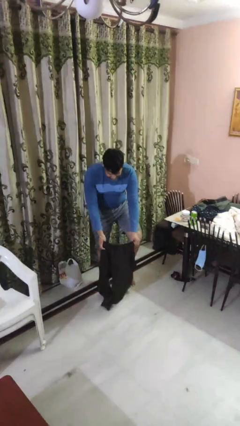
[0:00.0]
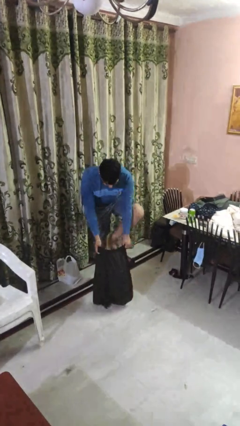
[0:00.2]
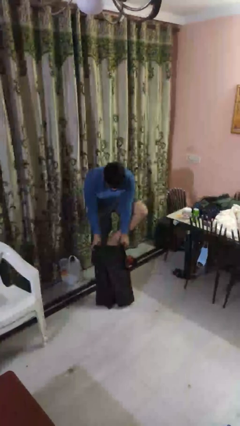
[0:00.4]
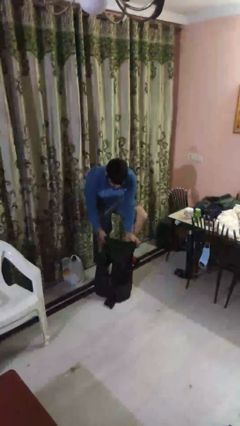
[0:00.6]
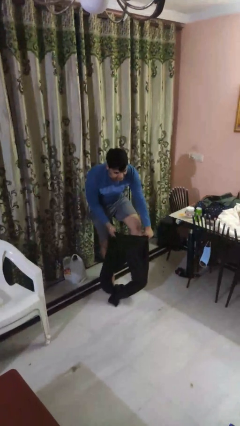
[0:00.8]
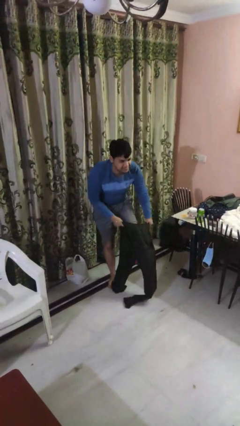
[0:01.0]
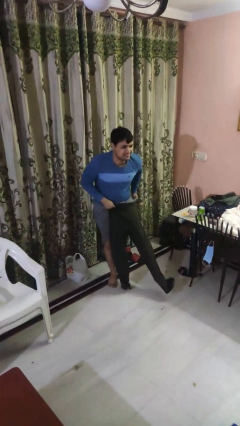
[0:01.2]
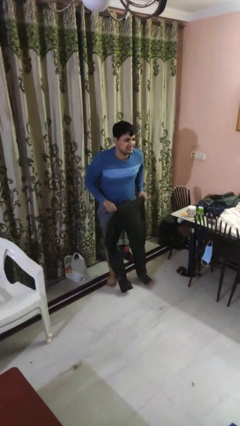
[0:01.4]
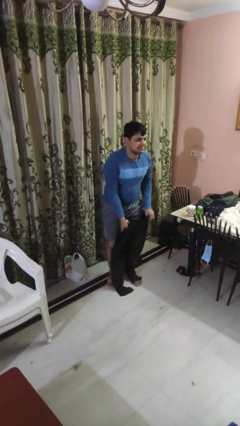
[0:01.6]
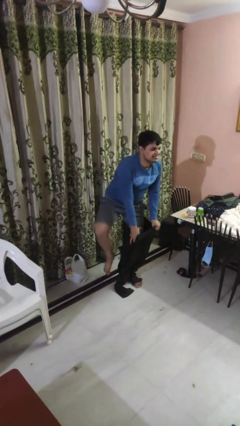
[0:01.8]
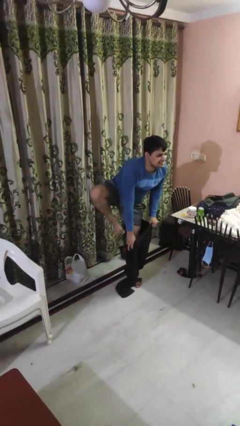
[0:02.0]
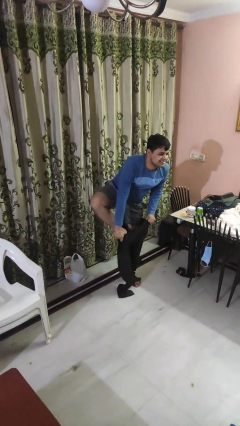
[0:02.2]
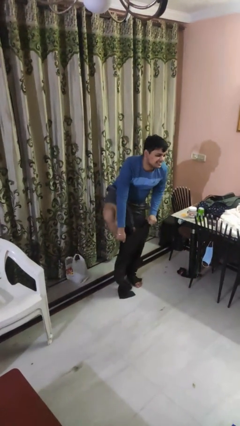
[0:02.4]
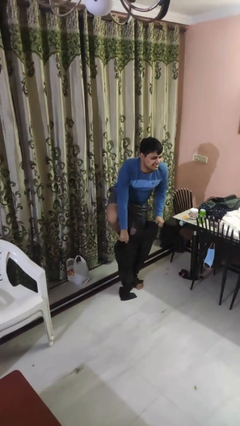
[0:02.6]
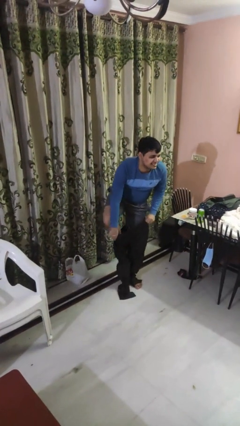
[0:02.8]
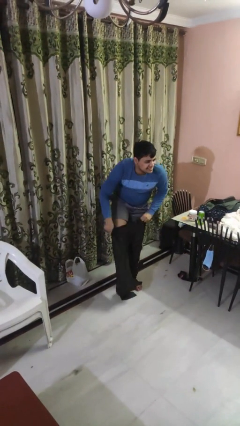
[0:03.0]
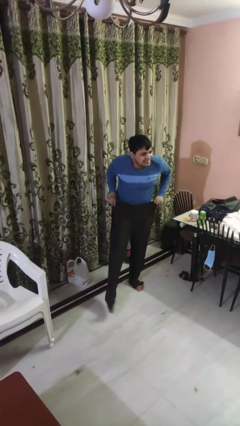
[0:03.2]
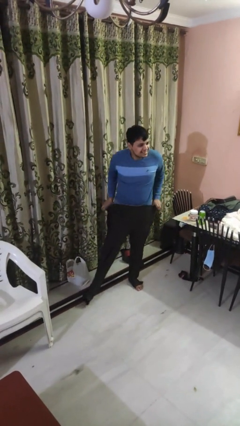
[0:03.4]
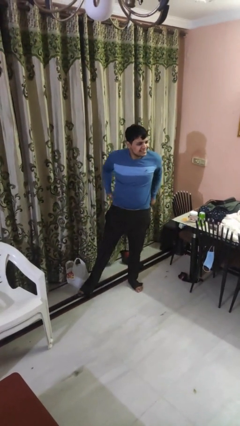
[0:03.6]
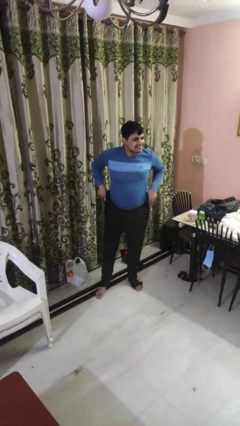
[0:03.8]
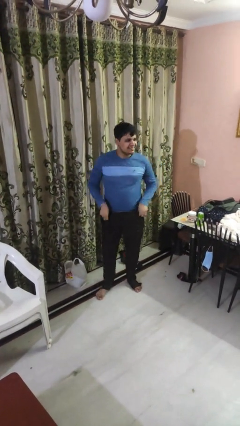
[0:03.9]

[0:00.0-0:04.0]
person puts on pants

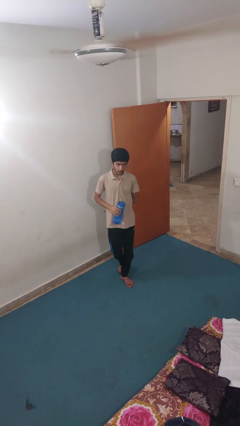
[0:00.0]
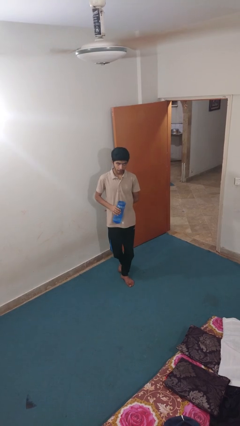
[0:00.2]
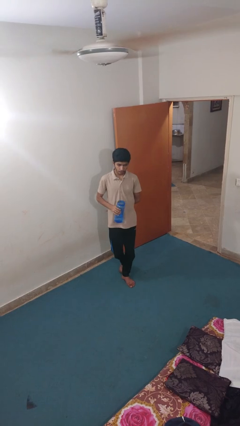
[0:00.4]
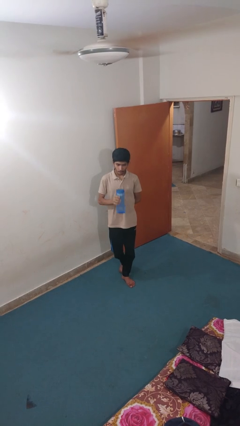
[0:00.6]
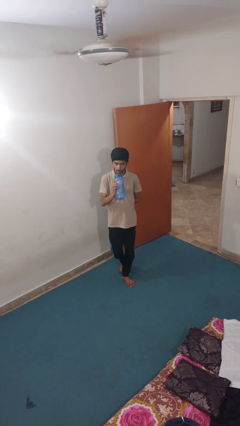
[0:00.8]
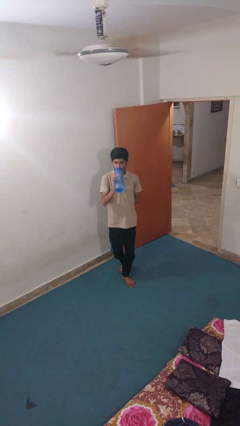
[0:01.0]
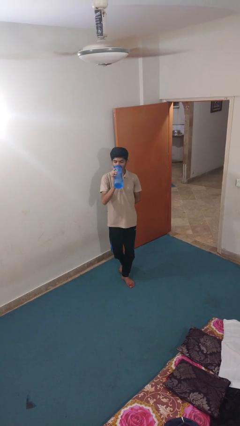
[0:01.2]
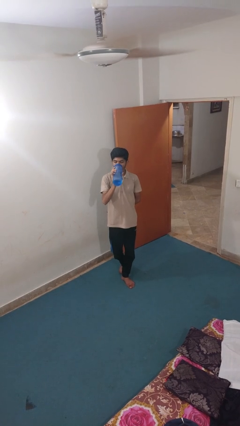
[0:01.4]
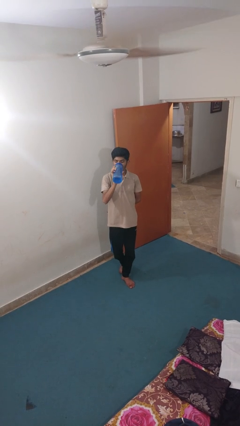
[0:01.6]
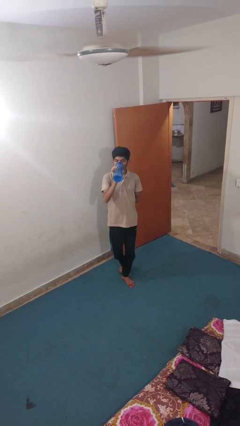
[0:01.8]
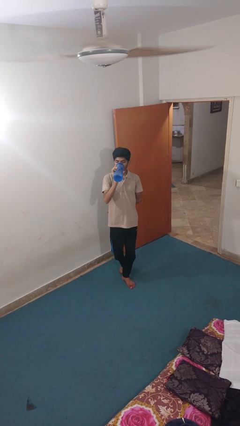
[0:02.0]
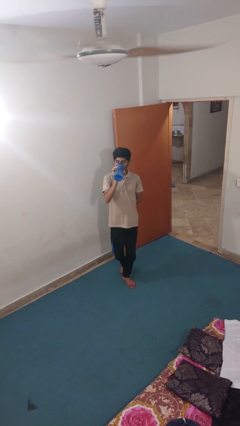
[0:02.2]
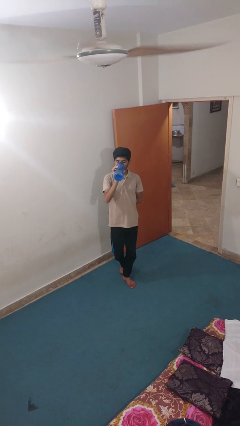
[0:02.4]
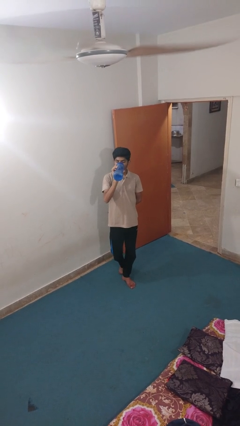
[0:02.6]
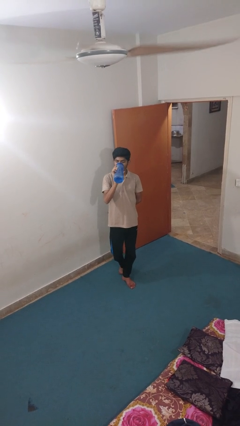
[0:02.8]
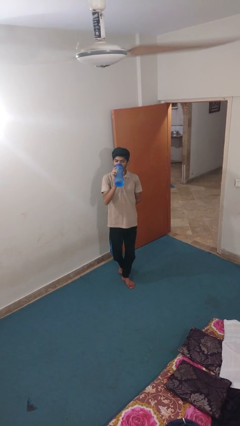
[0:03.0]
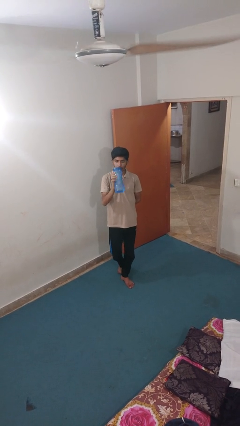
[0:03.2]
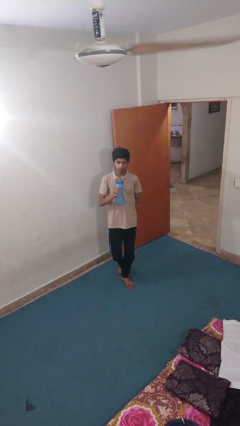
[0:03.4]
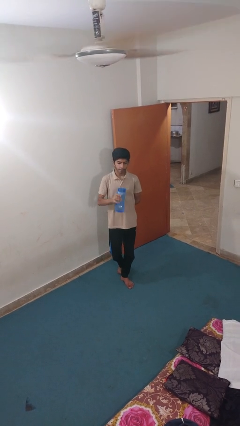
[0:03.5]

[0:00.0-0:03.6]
person drinks from bottle

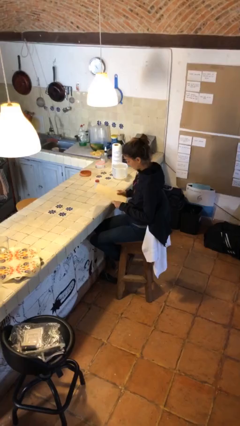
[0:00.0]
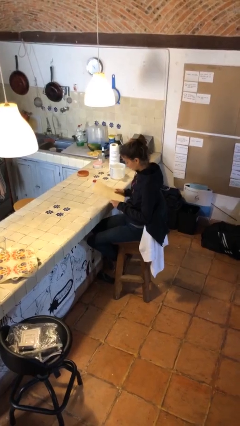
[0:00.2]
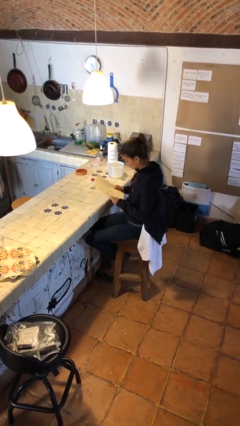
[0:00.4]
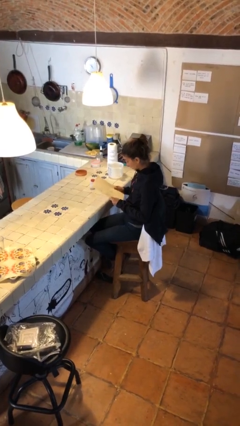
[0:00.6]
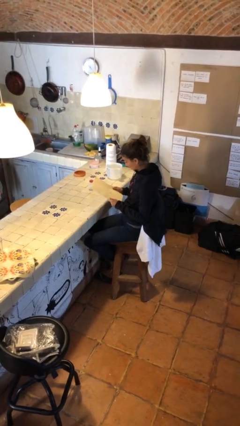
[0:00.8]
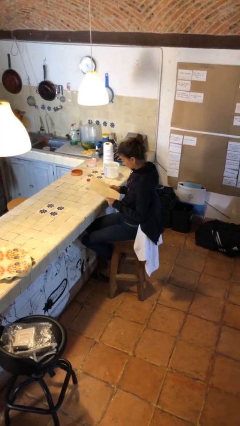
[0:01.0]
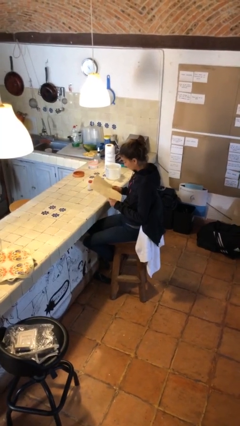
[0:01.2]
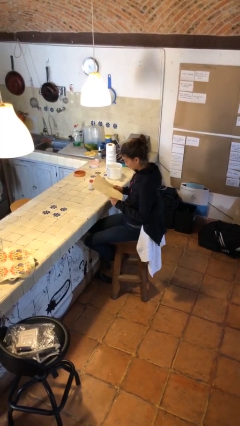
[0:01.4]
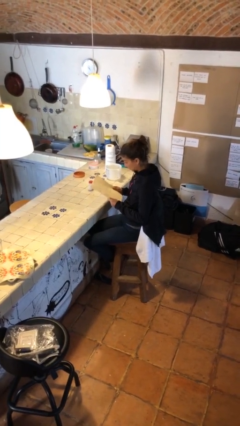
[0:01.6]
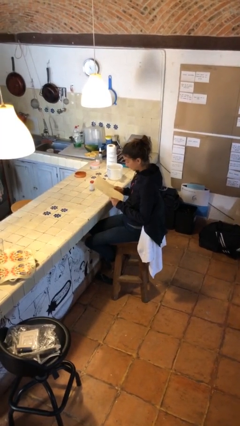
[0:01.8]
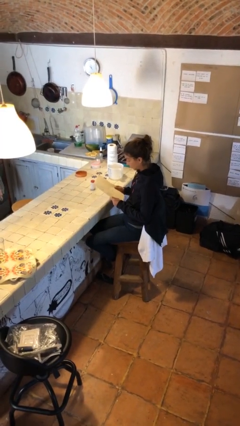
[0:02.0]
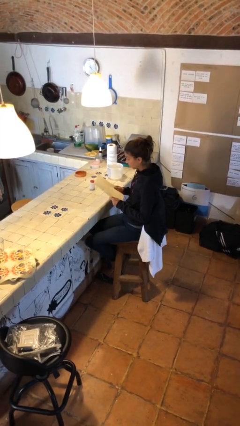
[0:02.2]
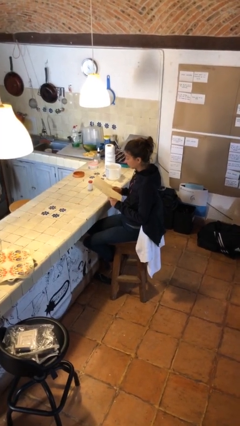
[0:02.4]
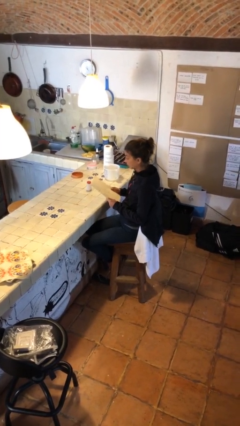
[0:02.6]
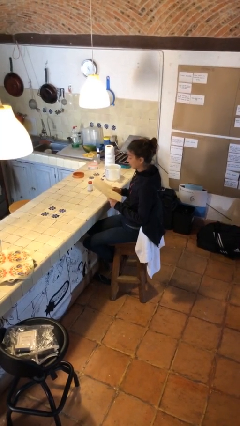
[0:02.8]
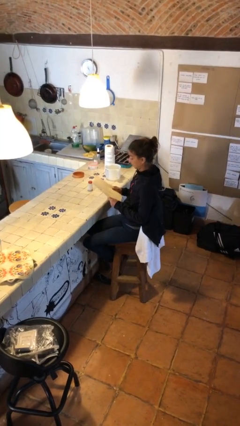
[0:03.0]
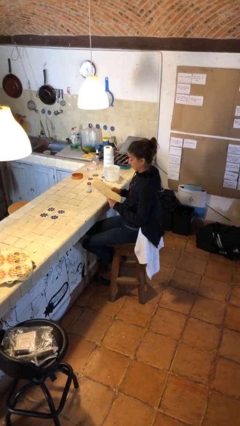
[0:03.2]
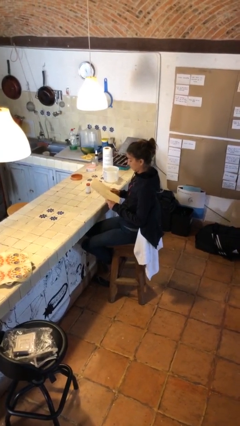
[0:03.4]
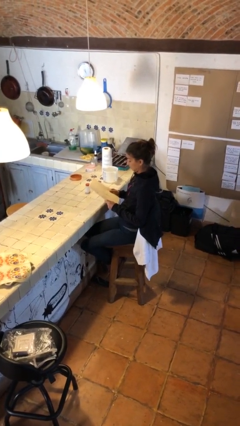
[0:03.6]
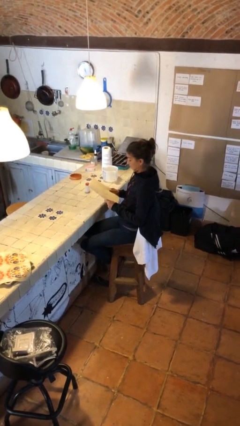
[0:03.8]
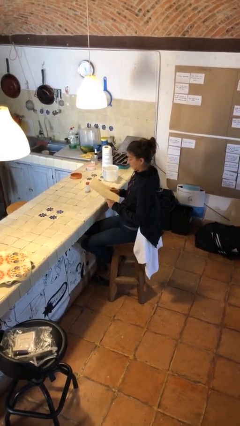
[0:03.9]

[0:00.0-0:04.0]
person reads document

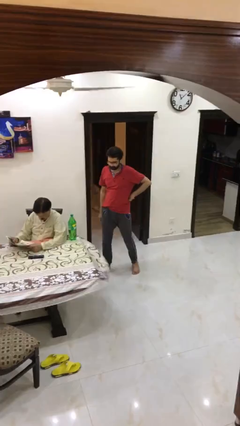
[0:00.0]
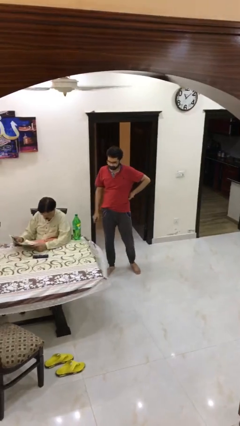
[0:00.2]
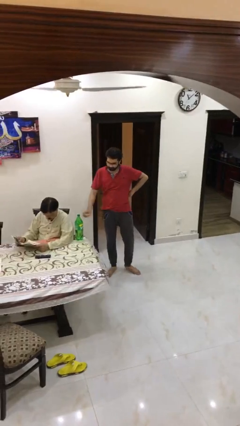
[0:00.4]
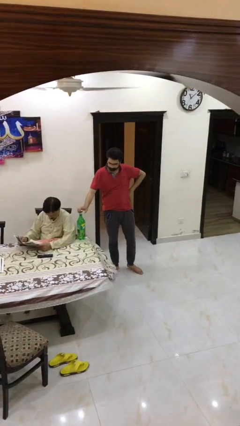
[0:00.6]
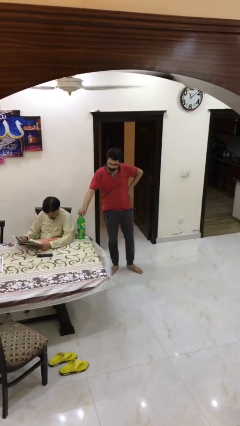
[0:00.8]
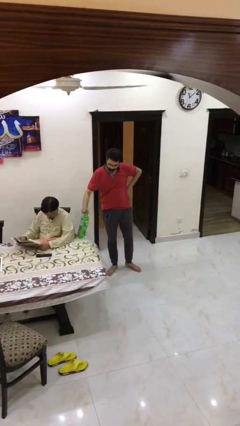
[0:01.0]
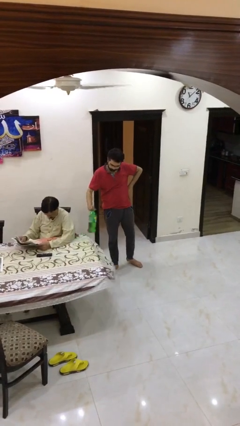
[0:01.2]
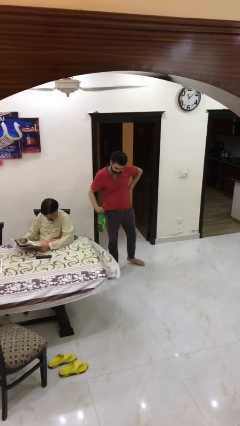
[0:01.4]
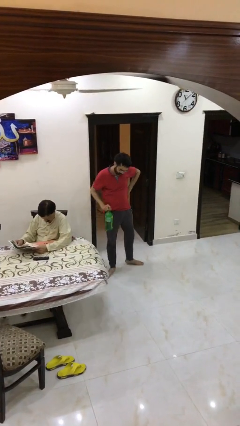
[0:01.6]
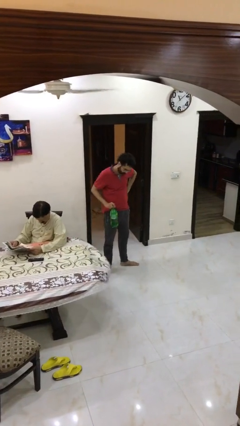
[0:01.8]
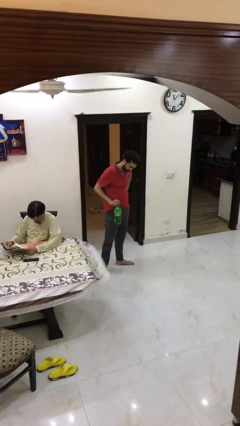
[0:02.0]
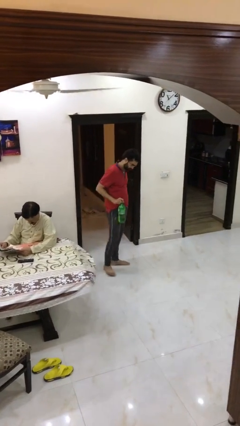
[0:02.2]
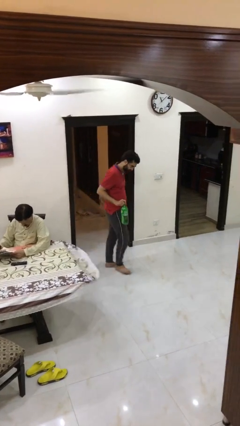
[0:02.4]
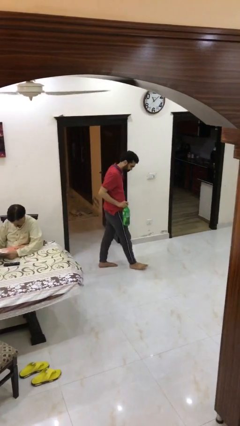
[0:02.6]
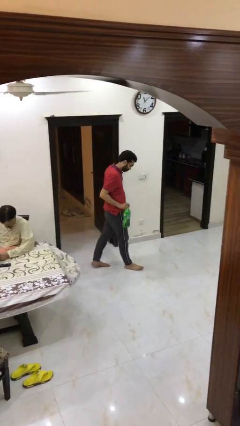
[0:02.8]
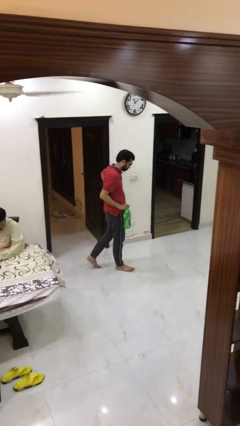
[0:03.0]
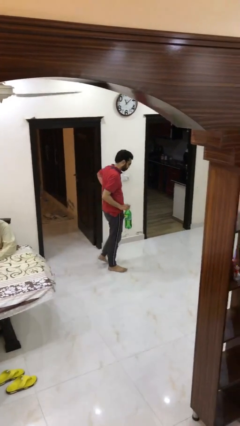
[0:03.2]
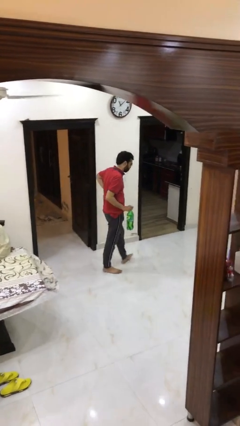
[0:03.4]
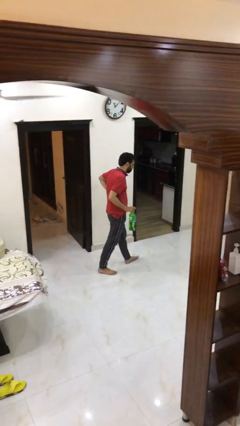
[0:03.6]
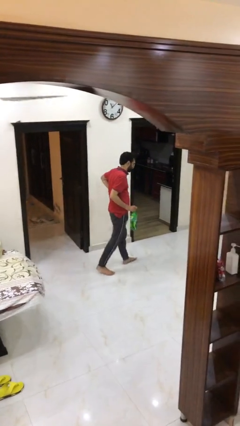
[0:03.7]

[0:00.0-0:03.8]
person steals object from person

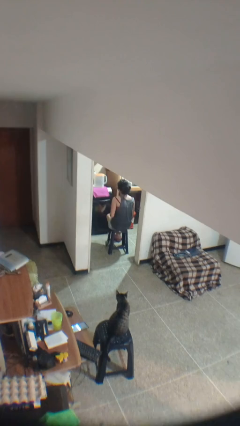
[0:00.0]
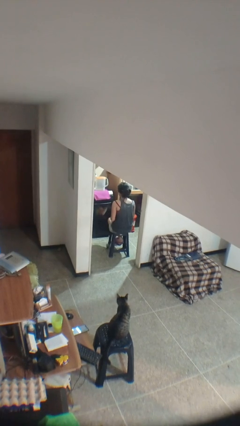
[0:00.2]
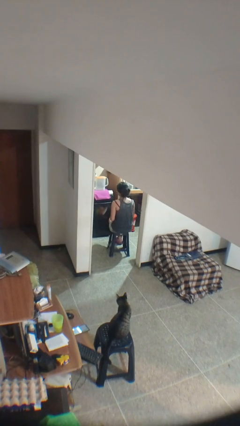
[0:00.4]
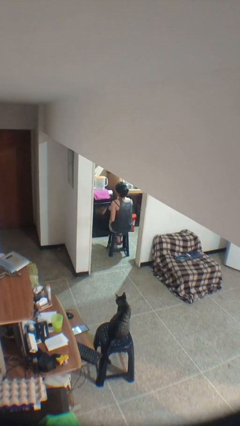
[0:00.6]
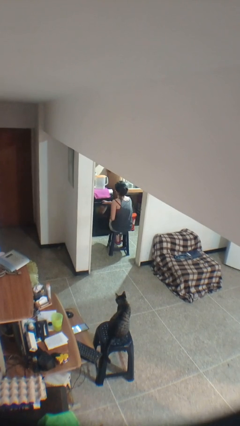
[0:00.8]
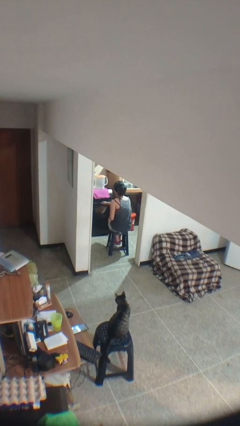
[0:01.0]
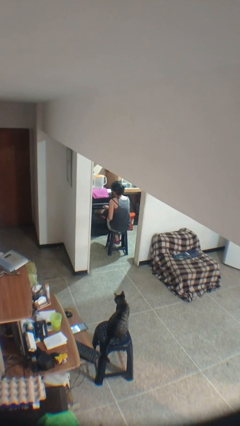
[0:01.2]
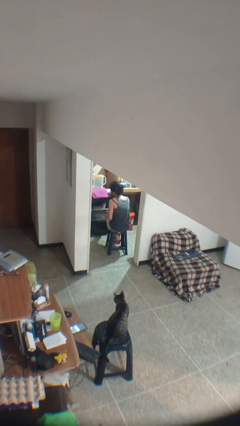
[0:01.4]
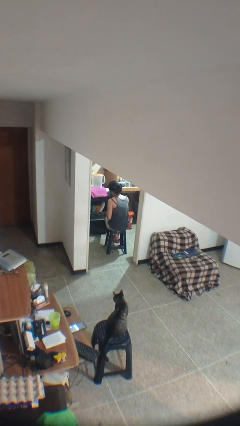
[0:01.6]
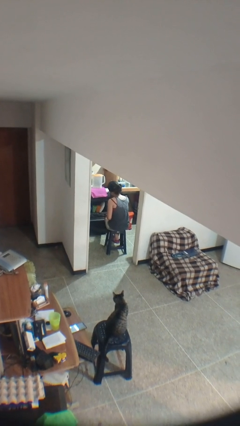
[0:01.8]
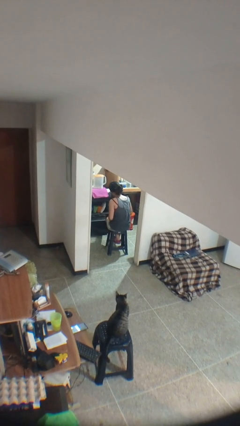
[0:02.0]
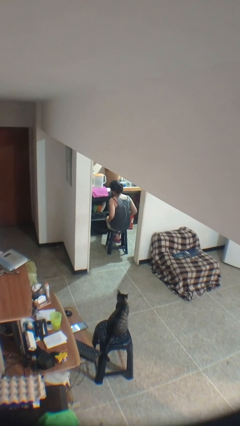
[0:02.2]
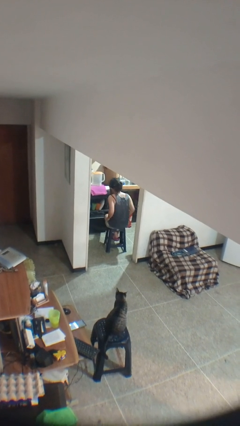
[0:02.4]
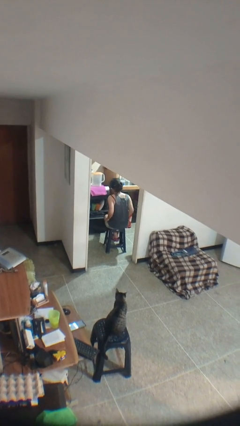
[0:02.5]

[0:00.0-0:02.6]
person opens dishwasher
